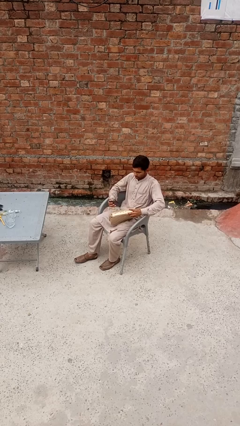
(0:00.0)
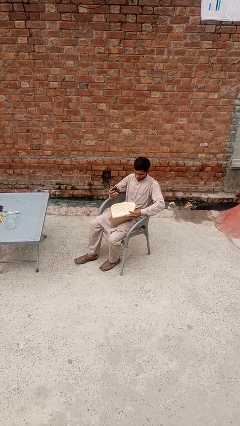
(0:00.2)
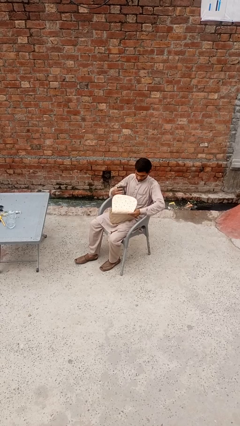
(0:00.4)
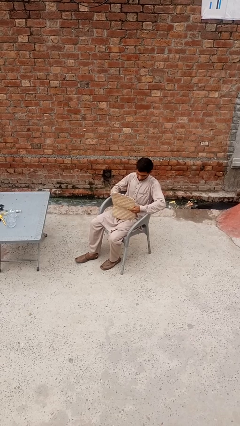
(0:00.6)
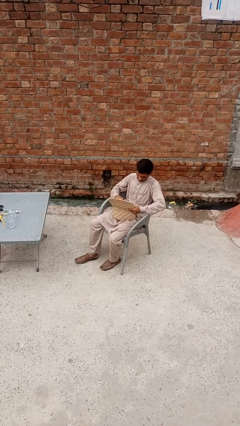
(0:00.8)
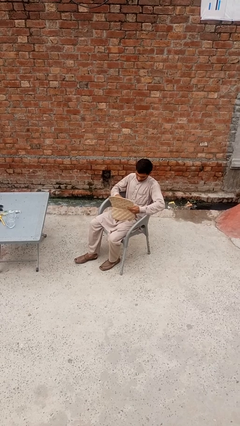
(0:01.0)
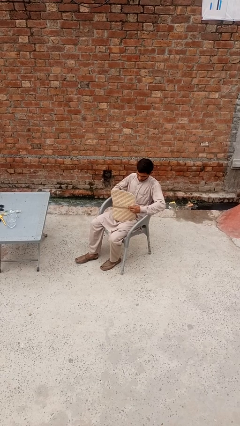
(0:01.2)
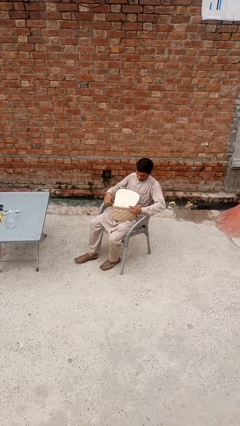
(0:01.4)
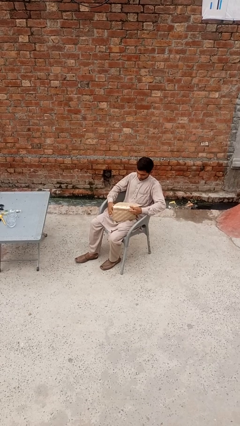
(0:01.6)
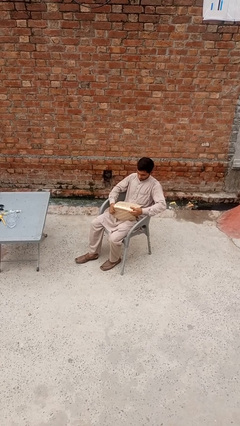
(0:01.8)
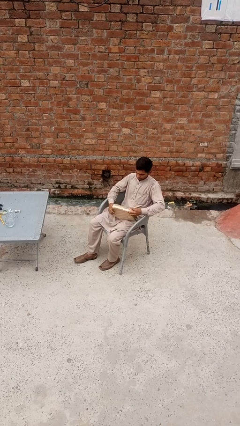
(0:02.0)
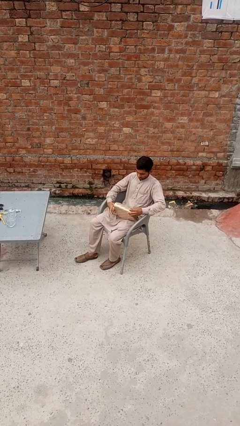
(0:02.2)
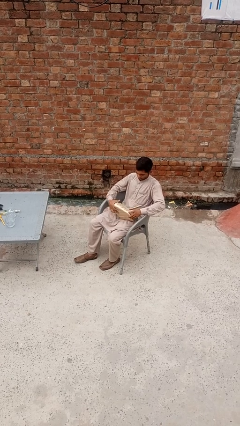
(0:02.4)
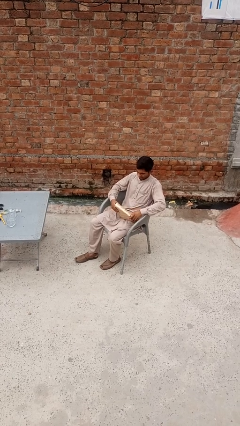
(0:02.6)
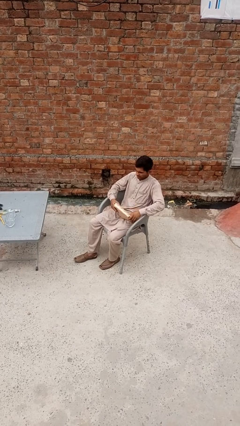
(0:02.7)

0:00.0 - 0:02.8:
person puts object into purse

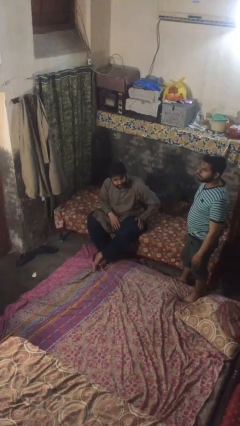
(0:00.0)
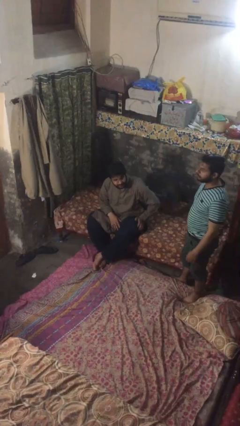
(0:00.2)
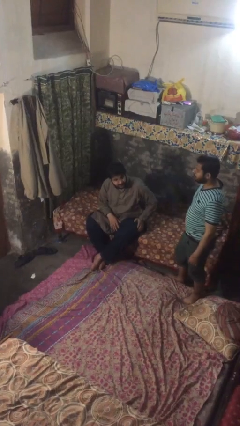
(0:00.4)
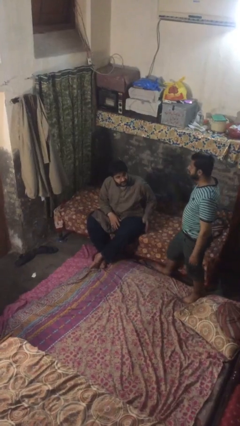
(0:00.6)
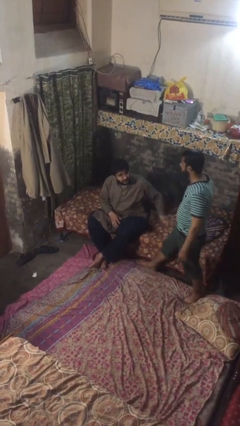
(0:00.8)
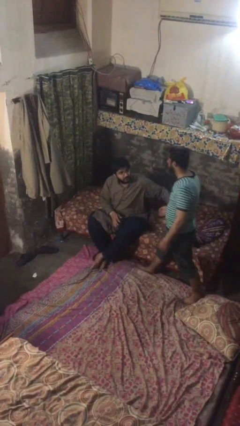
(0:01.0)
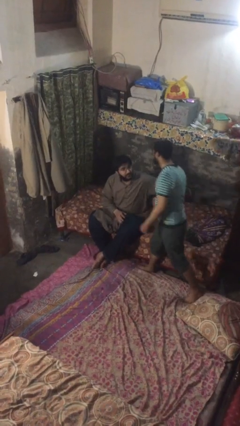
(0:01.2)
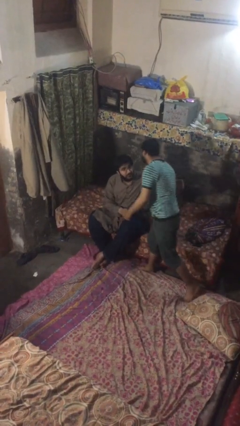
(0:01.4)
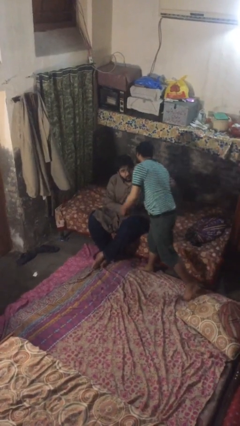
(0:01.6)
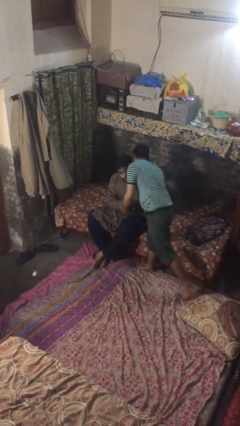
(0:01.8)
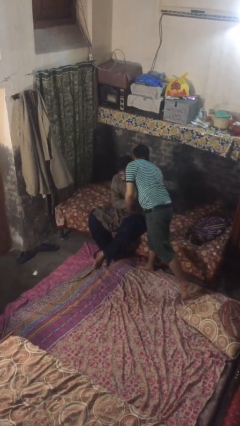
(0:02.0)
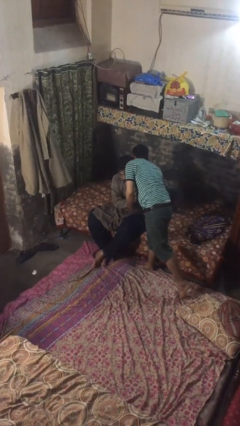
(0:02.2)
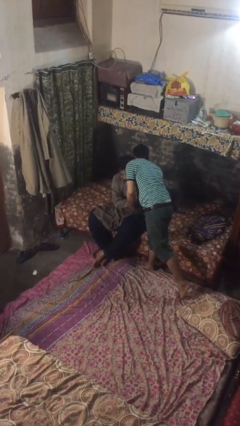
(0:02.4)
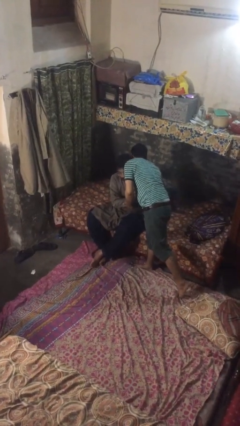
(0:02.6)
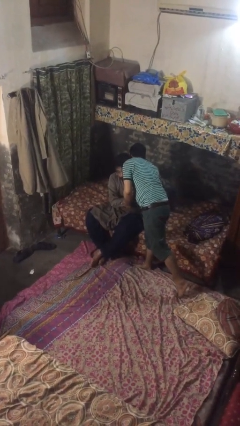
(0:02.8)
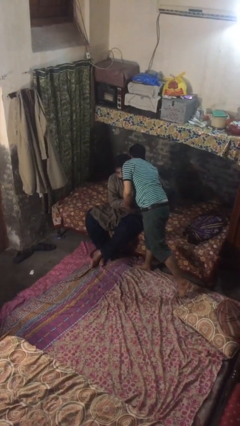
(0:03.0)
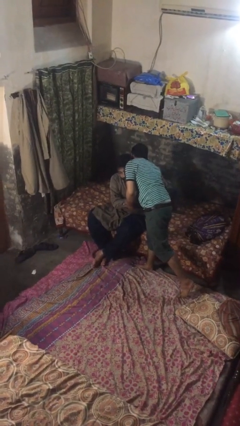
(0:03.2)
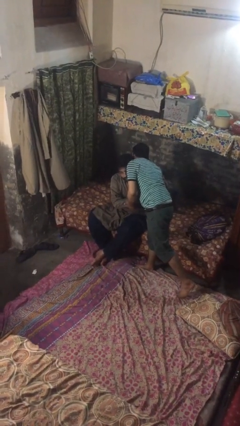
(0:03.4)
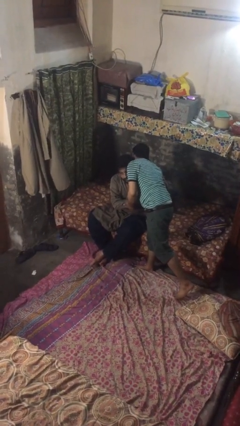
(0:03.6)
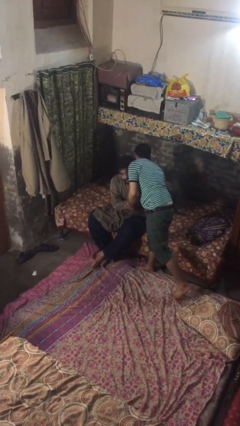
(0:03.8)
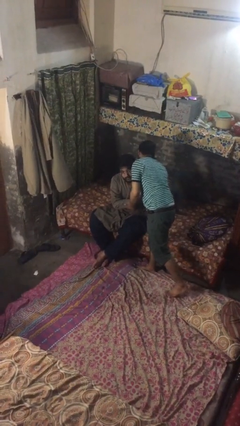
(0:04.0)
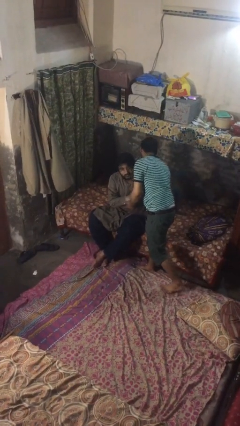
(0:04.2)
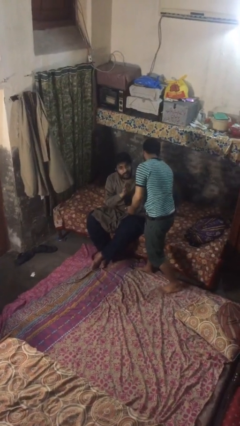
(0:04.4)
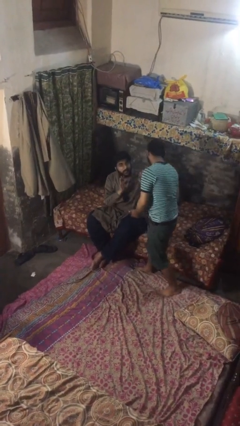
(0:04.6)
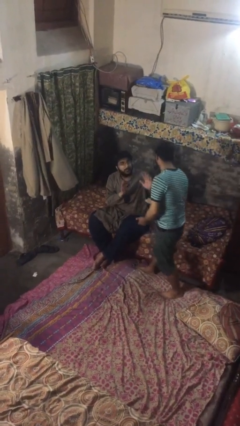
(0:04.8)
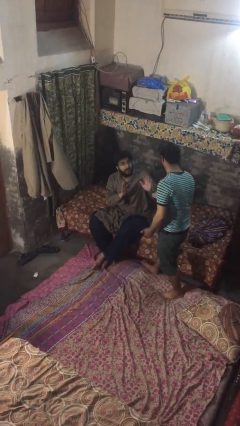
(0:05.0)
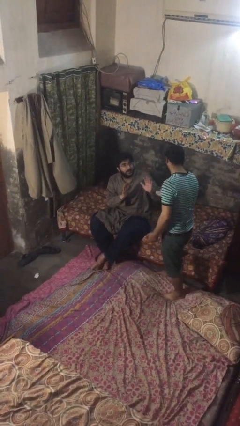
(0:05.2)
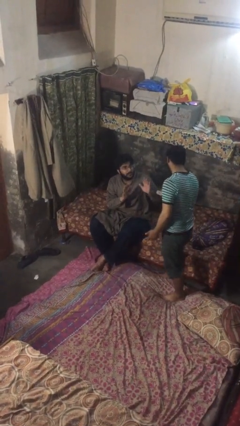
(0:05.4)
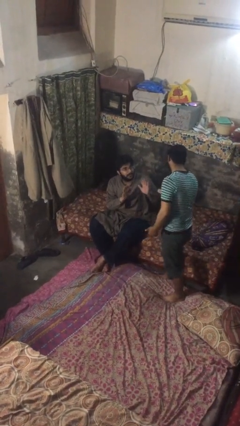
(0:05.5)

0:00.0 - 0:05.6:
person embraces person

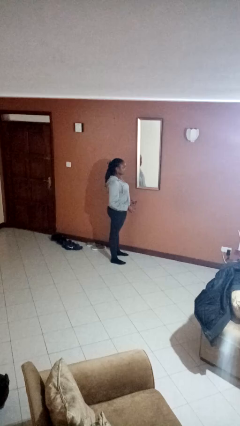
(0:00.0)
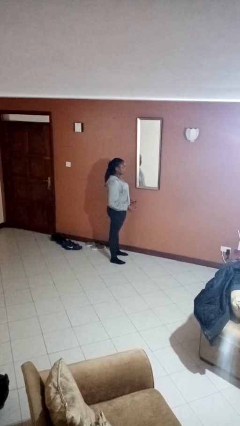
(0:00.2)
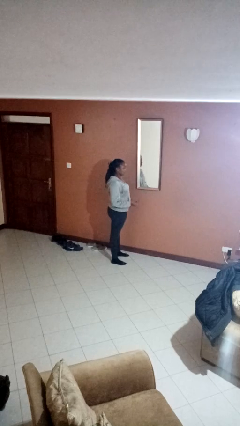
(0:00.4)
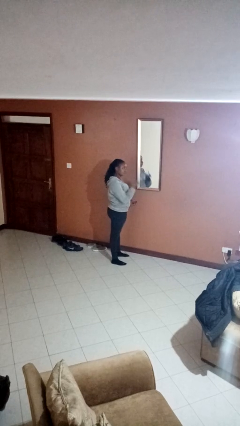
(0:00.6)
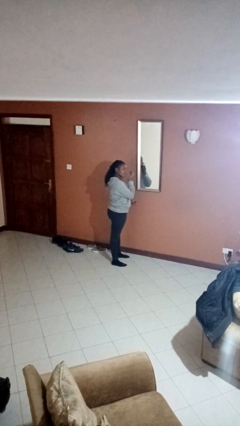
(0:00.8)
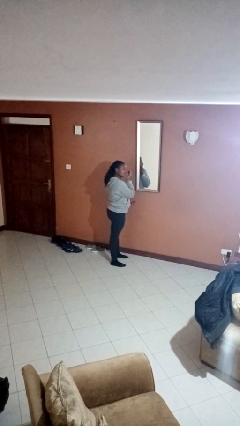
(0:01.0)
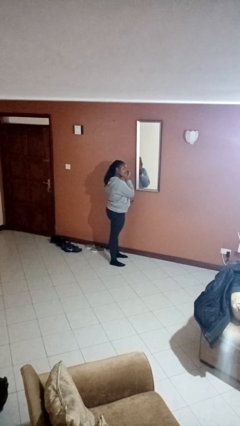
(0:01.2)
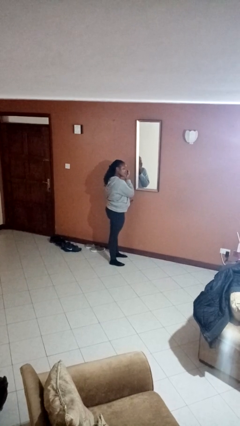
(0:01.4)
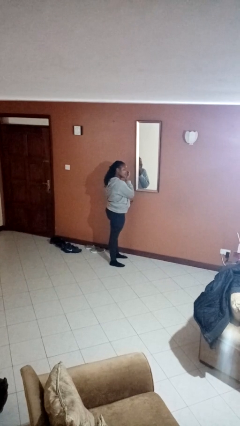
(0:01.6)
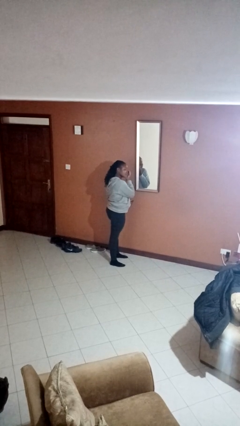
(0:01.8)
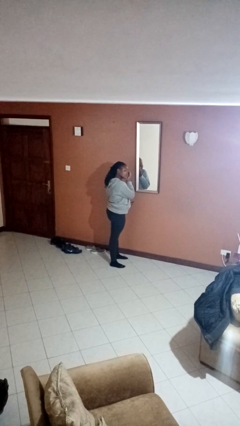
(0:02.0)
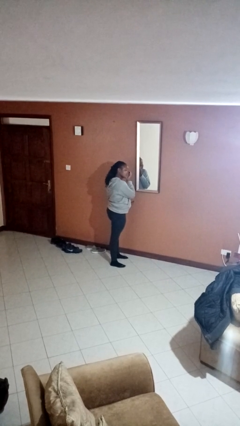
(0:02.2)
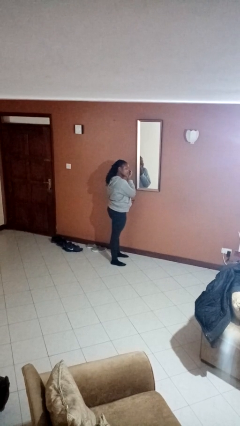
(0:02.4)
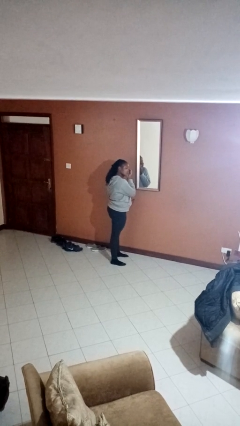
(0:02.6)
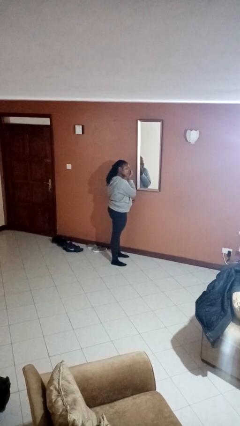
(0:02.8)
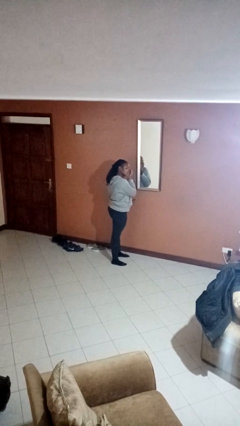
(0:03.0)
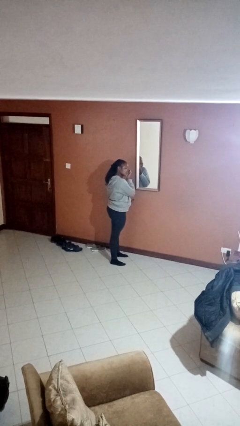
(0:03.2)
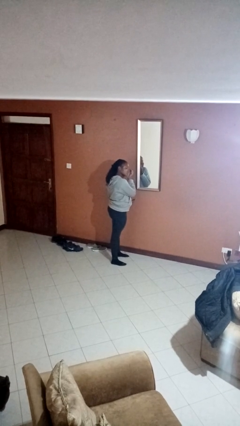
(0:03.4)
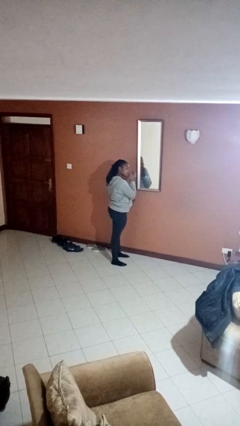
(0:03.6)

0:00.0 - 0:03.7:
person applies eye makeup

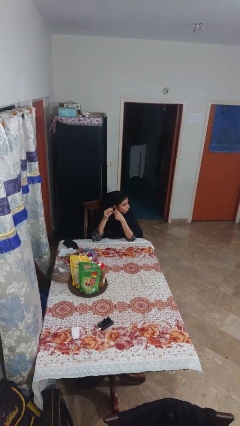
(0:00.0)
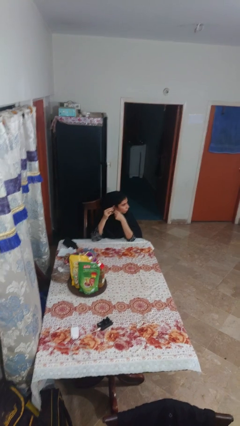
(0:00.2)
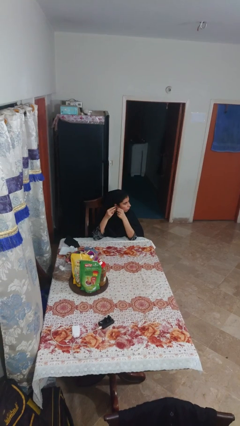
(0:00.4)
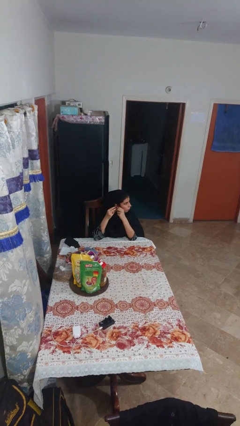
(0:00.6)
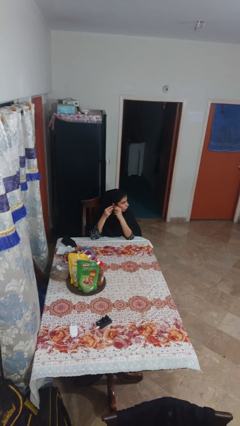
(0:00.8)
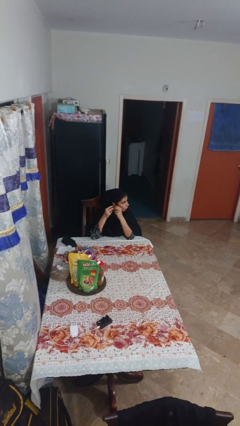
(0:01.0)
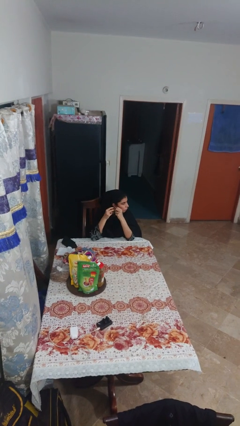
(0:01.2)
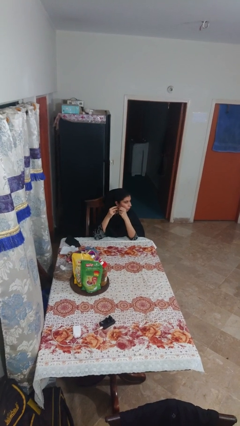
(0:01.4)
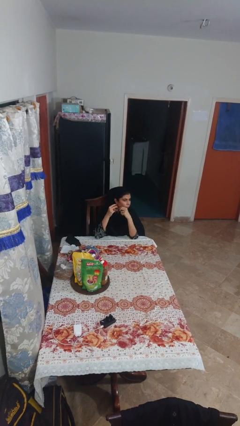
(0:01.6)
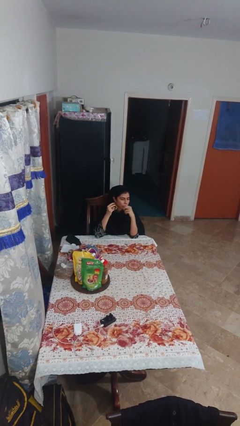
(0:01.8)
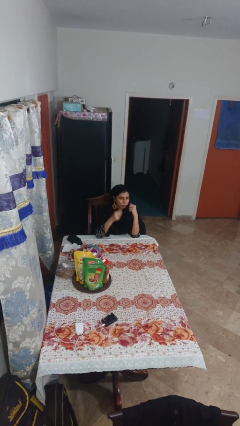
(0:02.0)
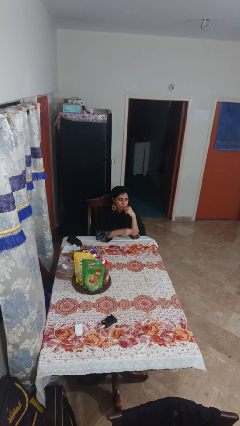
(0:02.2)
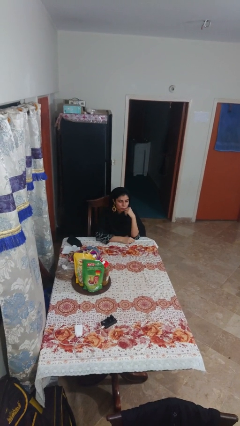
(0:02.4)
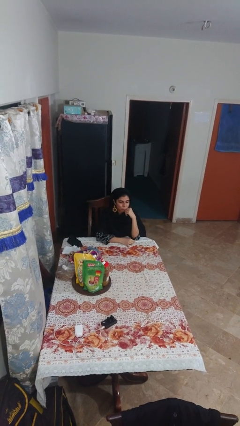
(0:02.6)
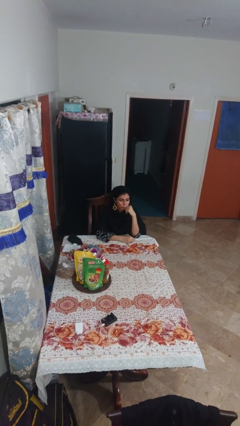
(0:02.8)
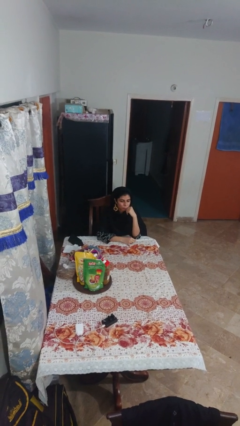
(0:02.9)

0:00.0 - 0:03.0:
person puts on earrings

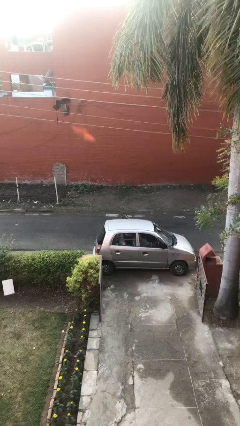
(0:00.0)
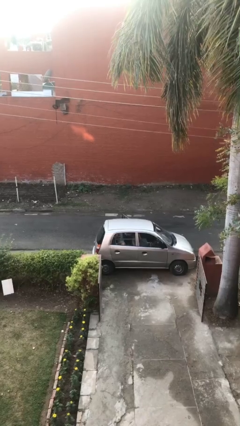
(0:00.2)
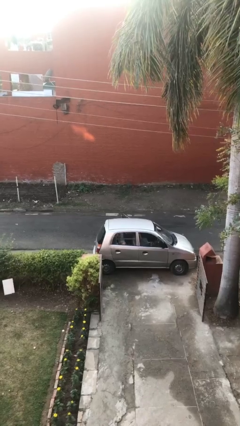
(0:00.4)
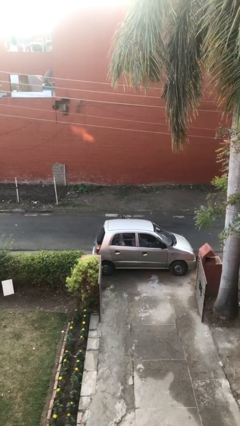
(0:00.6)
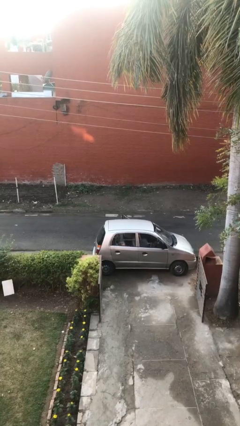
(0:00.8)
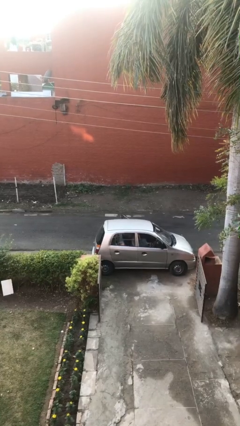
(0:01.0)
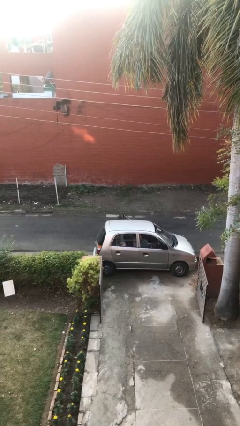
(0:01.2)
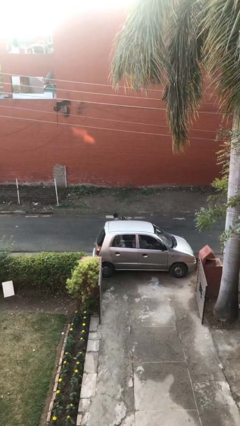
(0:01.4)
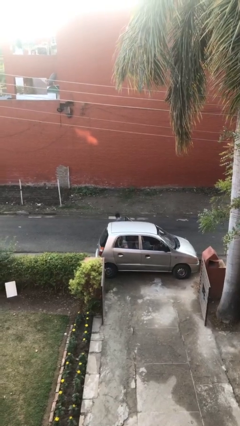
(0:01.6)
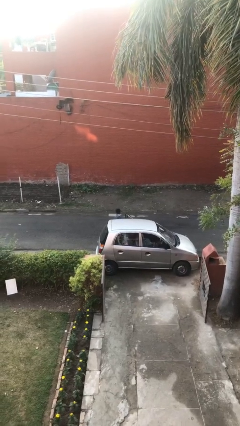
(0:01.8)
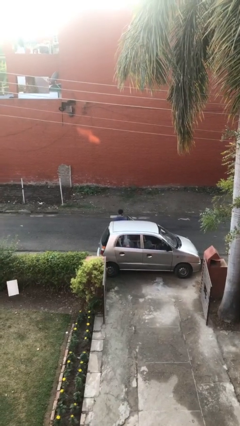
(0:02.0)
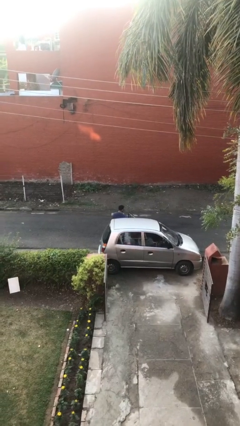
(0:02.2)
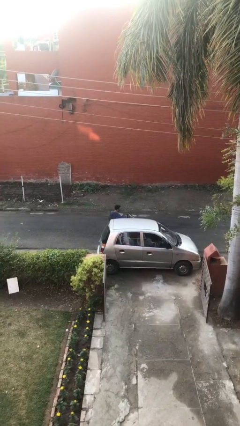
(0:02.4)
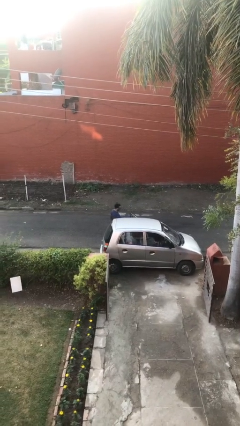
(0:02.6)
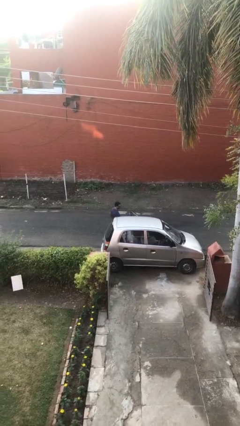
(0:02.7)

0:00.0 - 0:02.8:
person exits car
